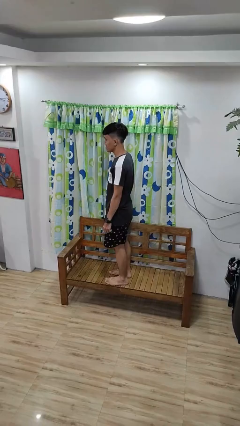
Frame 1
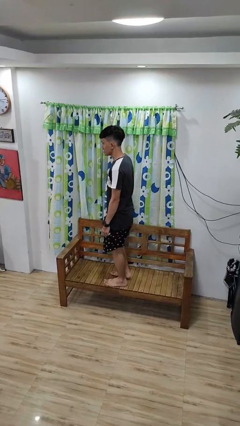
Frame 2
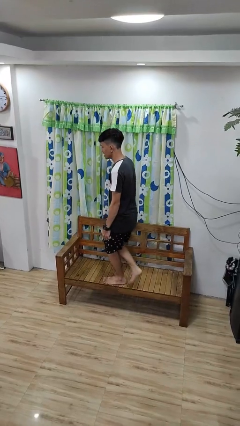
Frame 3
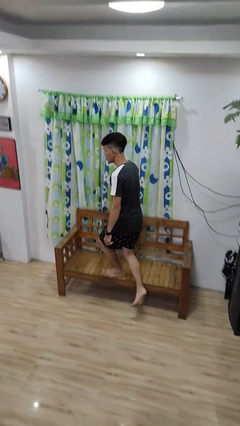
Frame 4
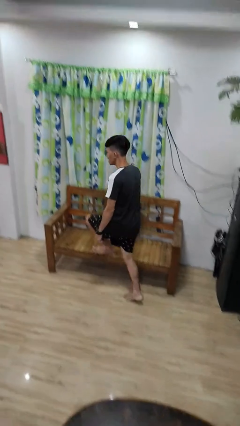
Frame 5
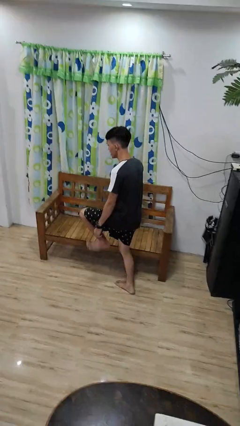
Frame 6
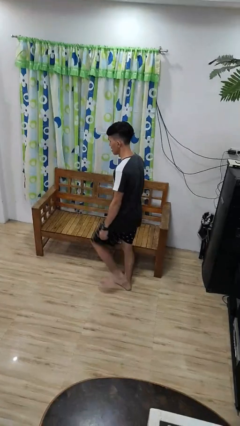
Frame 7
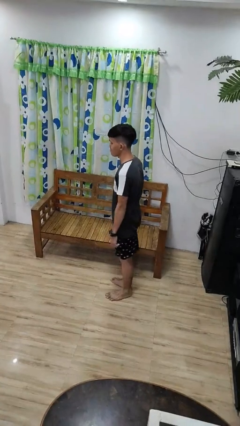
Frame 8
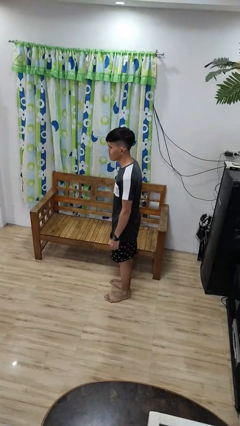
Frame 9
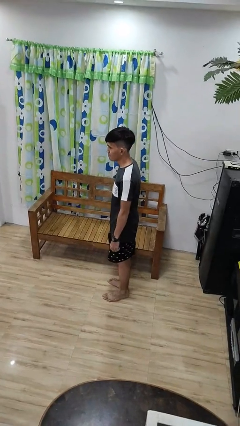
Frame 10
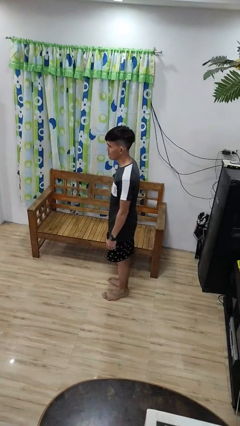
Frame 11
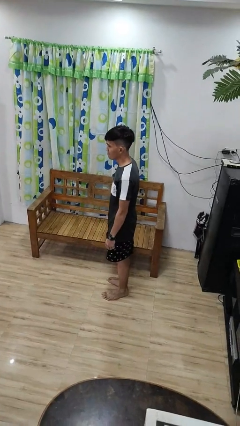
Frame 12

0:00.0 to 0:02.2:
person climbs off couch

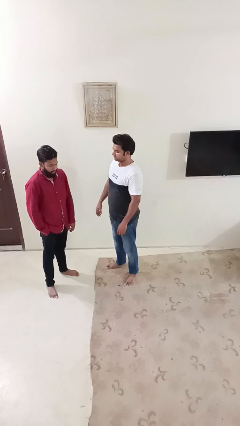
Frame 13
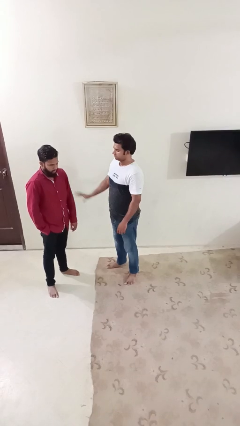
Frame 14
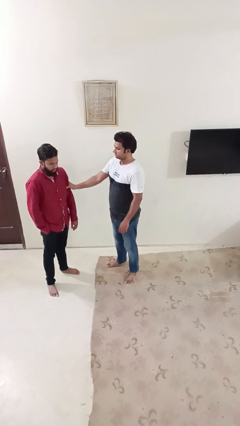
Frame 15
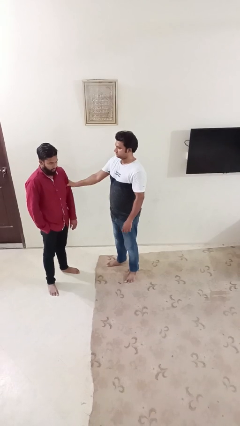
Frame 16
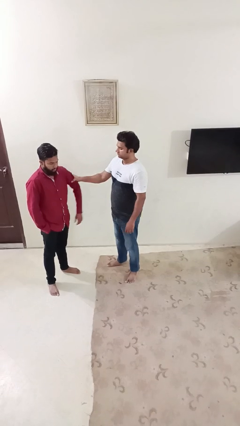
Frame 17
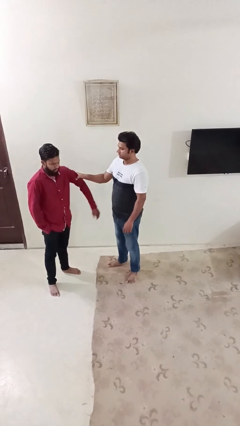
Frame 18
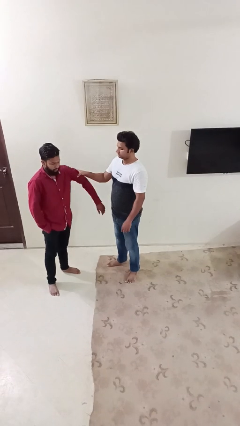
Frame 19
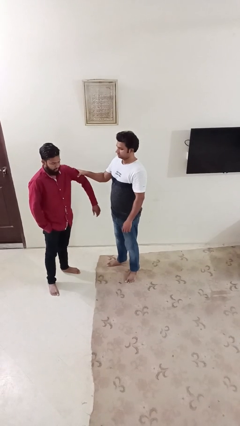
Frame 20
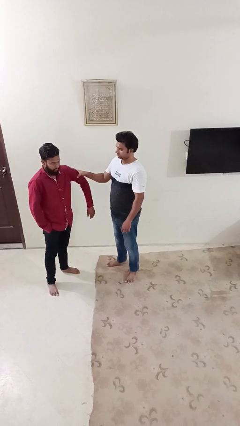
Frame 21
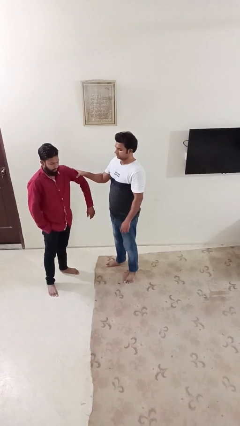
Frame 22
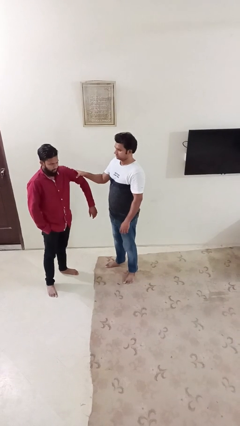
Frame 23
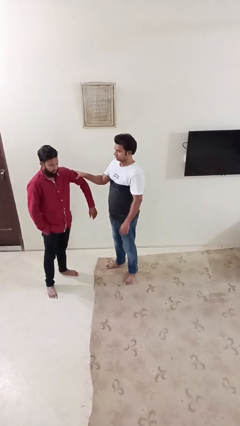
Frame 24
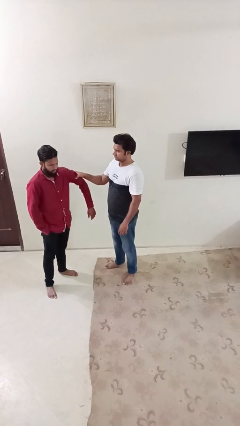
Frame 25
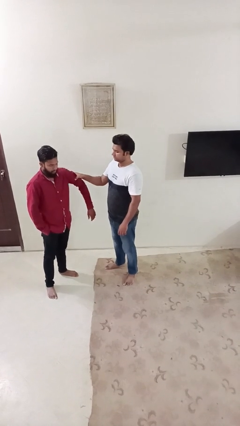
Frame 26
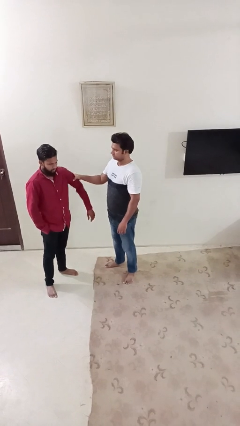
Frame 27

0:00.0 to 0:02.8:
person grabs person by bicep

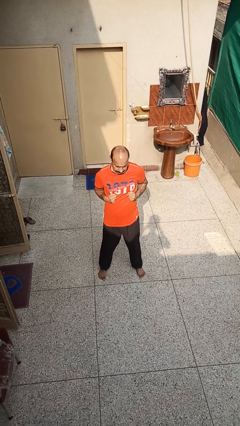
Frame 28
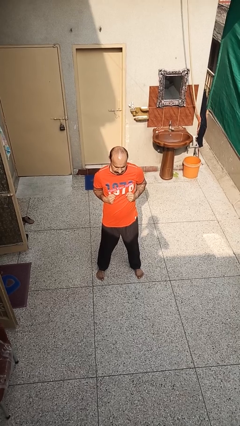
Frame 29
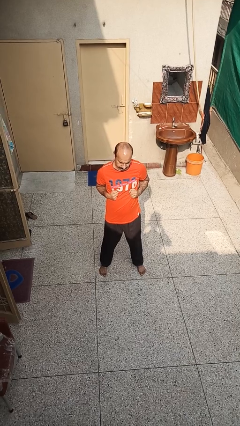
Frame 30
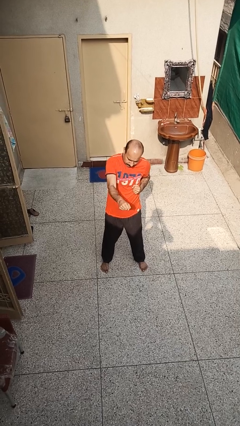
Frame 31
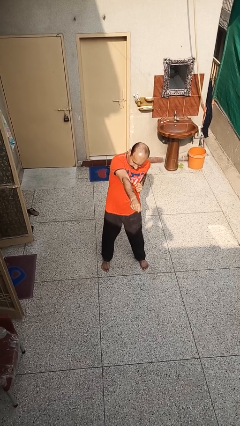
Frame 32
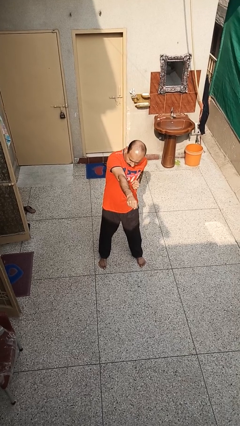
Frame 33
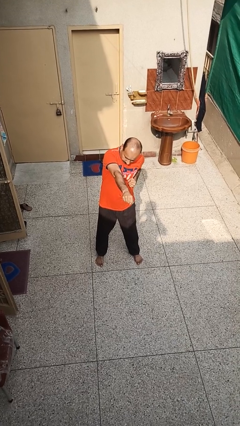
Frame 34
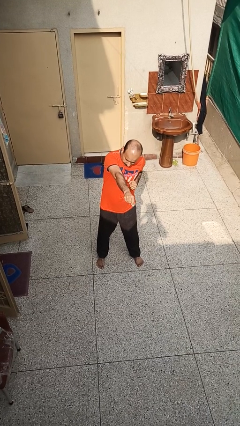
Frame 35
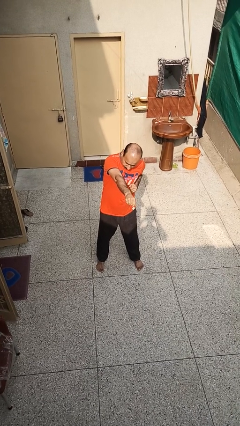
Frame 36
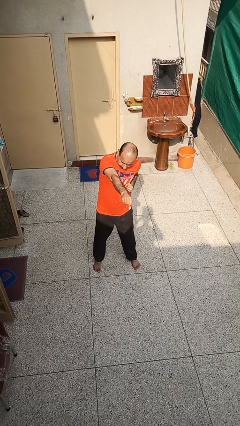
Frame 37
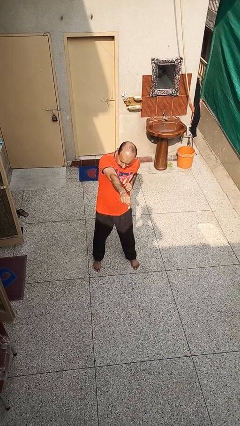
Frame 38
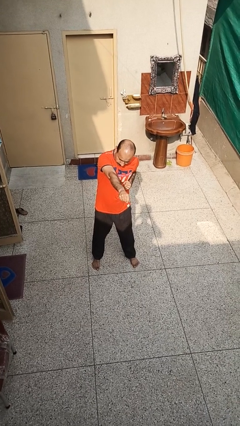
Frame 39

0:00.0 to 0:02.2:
person punches

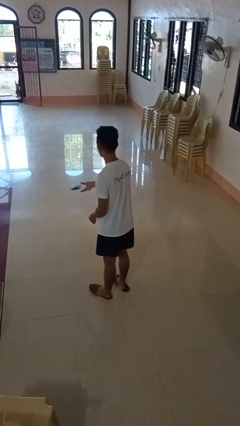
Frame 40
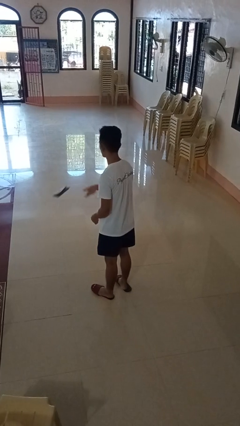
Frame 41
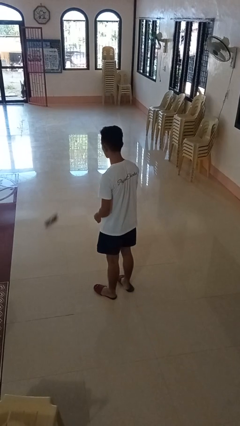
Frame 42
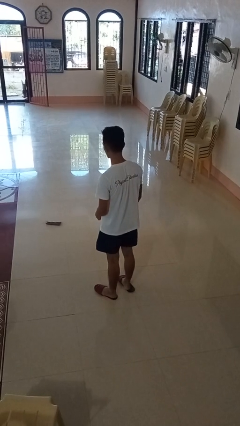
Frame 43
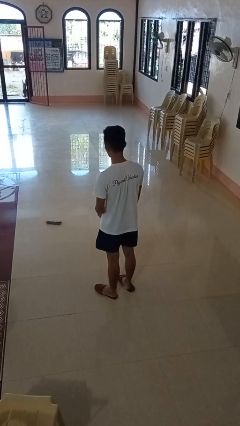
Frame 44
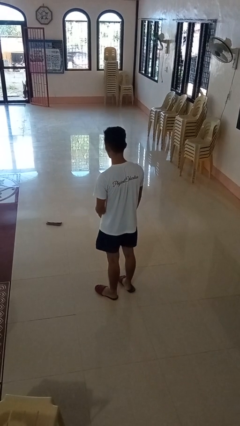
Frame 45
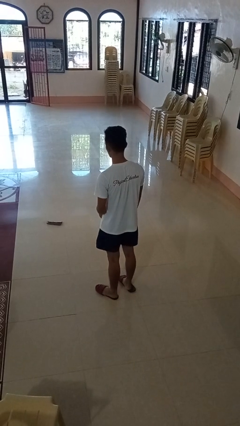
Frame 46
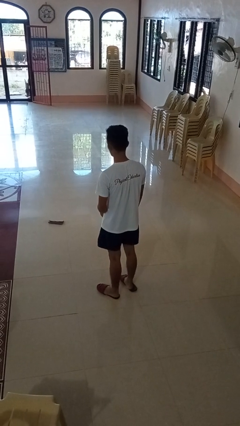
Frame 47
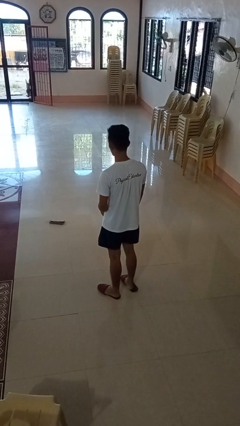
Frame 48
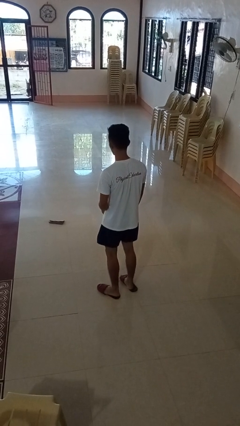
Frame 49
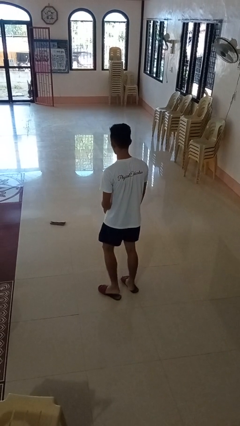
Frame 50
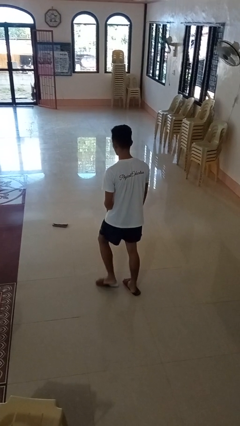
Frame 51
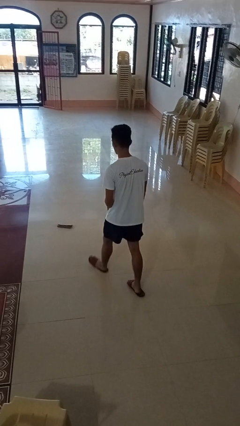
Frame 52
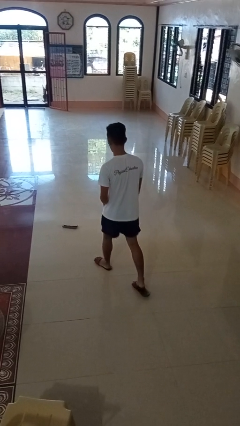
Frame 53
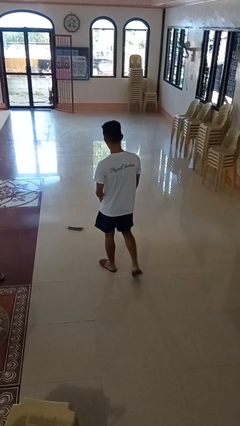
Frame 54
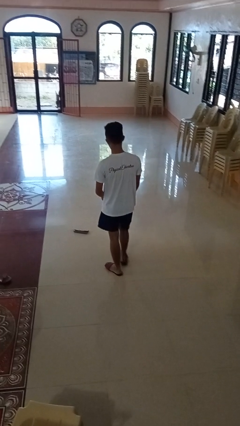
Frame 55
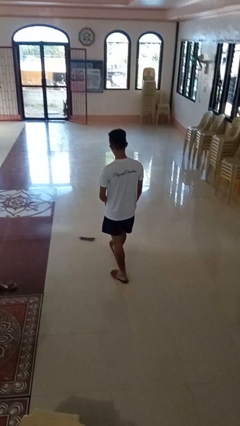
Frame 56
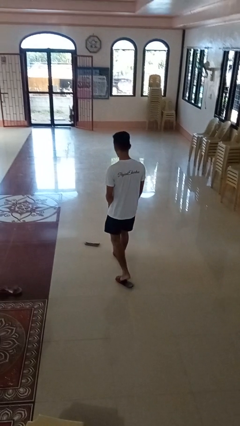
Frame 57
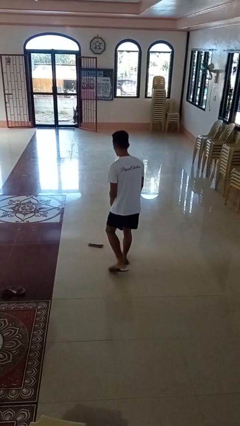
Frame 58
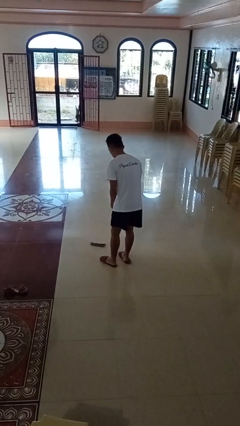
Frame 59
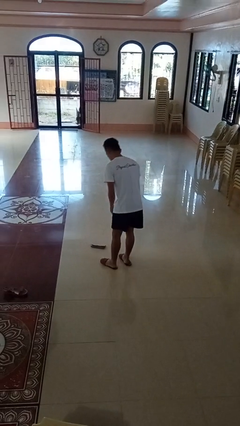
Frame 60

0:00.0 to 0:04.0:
person throws object to ground

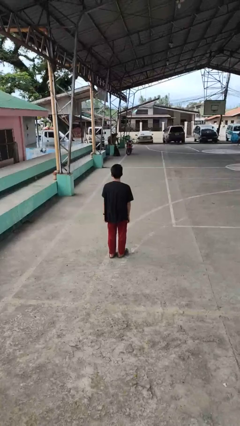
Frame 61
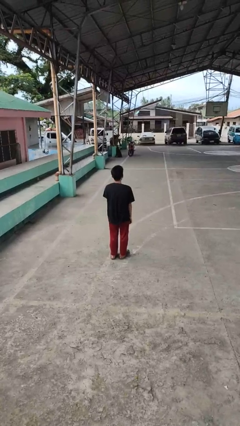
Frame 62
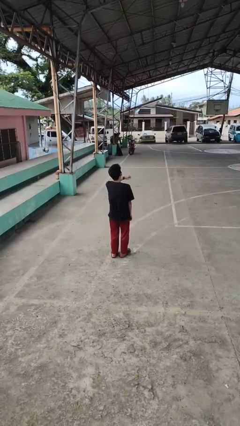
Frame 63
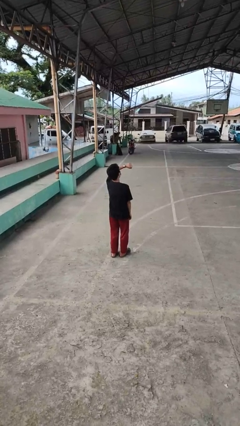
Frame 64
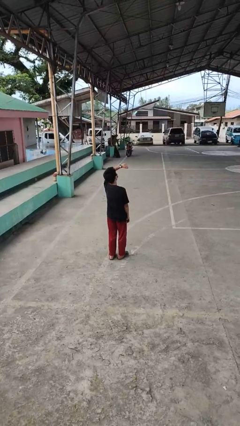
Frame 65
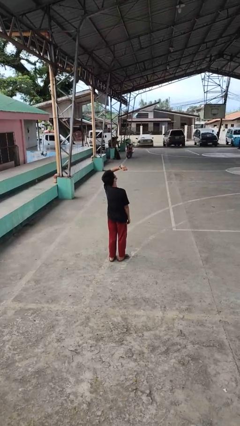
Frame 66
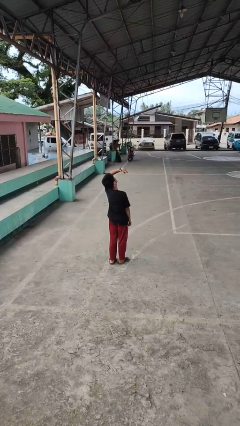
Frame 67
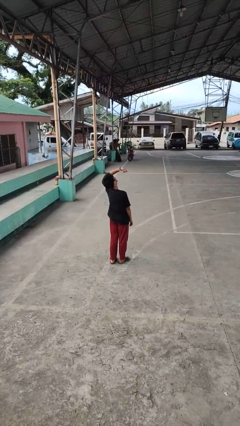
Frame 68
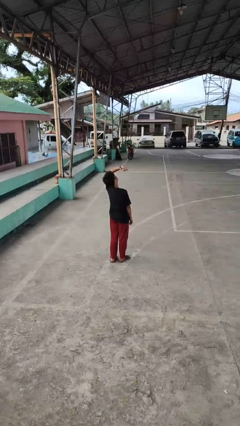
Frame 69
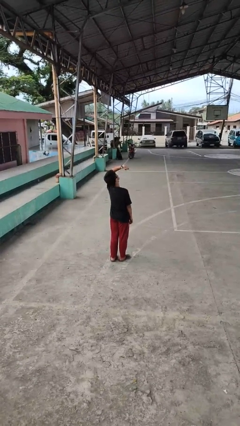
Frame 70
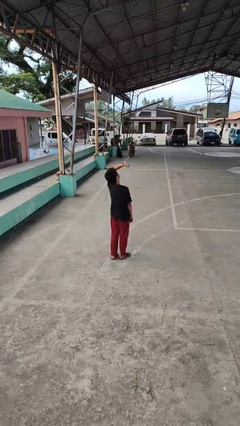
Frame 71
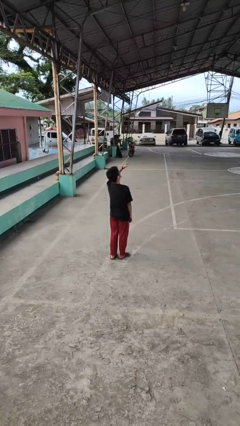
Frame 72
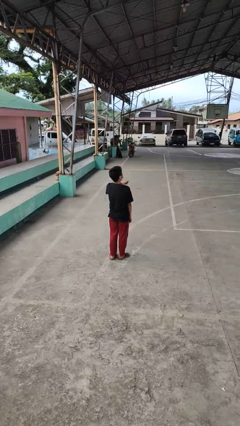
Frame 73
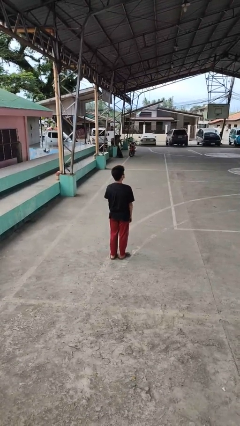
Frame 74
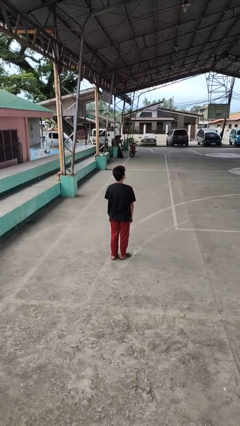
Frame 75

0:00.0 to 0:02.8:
person looks at wristwatch

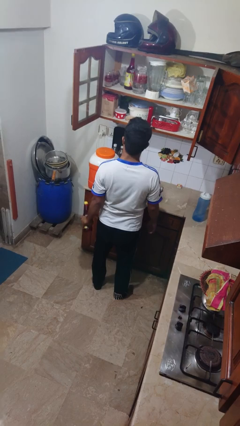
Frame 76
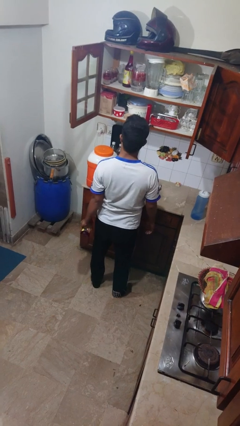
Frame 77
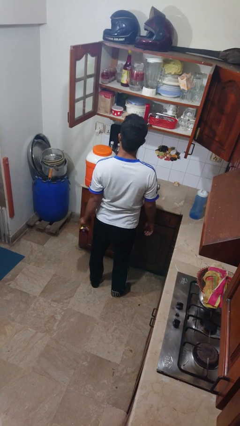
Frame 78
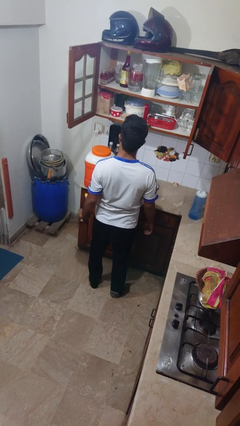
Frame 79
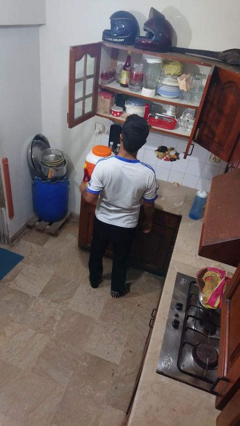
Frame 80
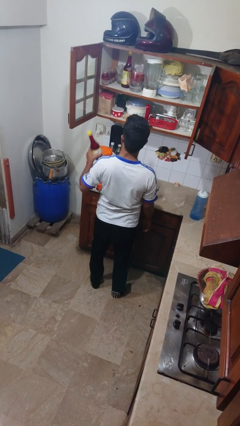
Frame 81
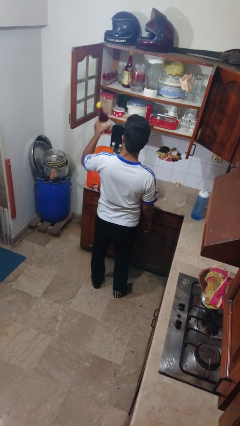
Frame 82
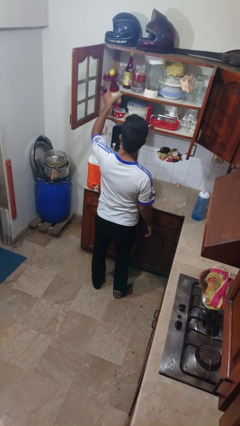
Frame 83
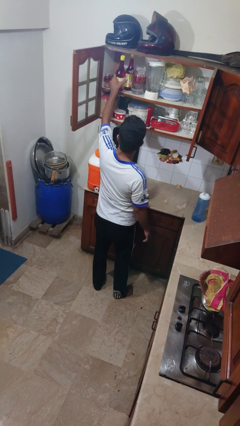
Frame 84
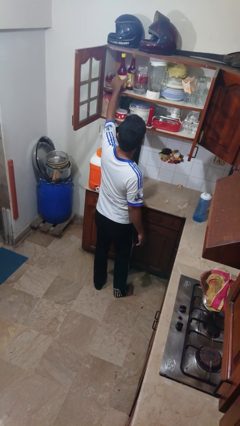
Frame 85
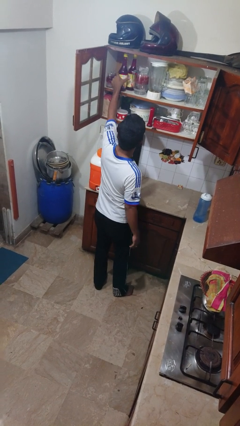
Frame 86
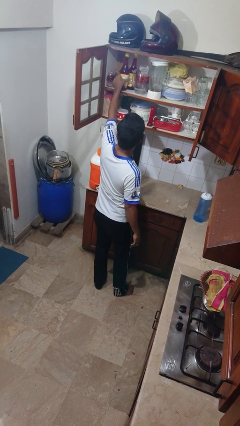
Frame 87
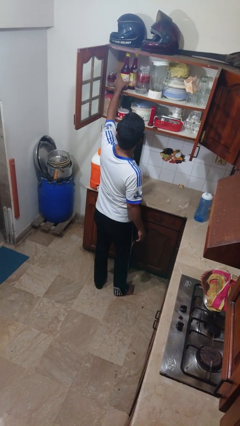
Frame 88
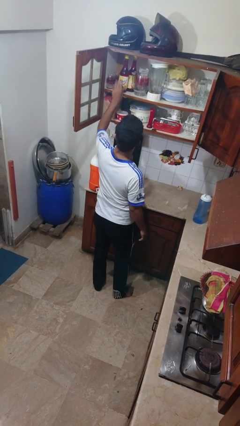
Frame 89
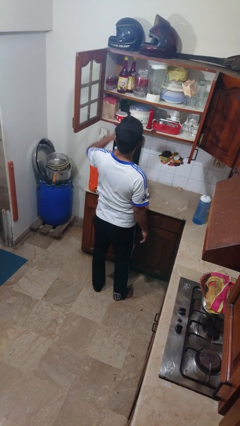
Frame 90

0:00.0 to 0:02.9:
person puts down object into cabinet

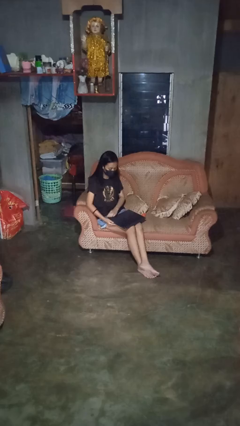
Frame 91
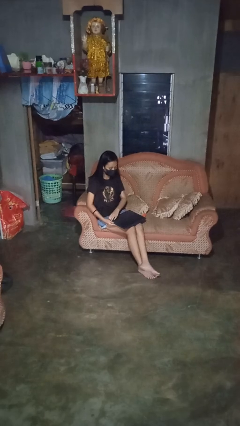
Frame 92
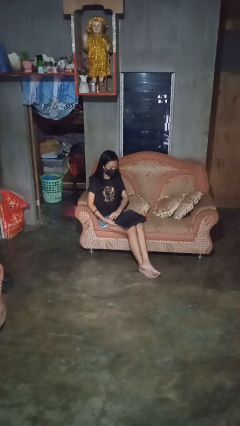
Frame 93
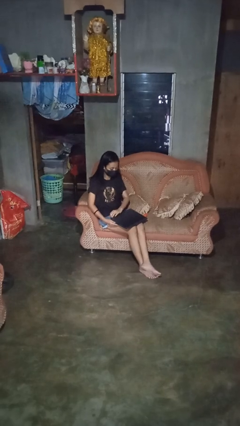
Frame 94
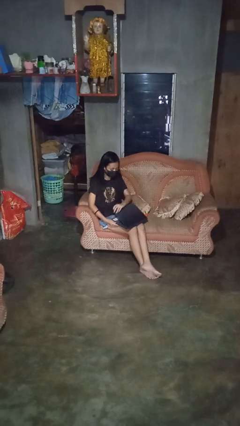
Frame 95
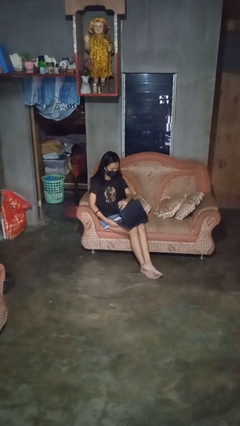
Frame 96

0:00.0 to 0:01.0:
person opens laptop
